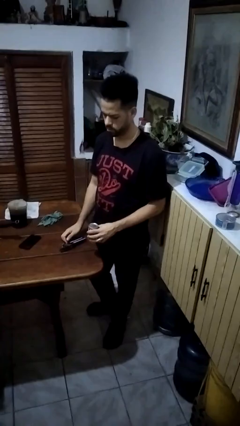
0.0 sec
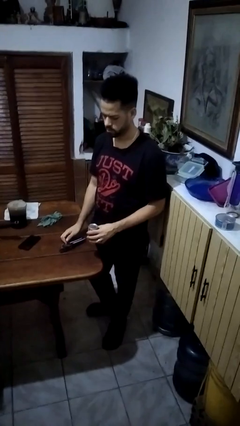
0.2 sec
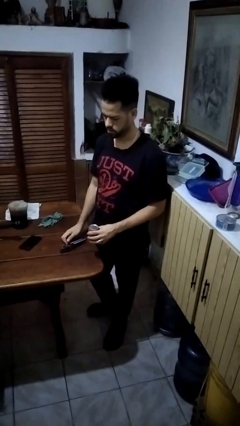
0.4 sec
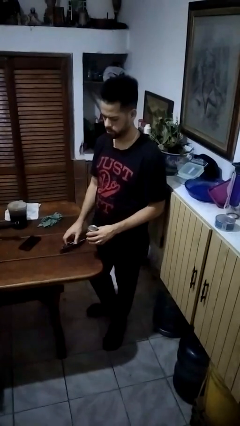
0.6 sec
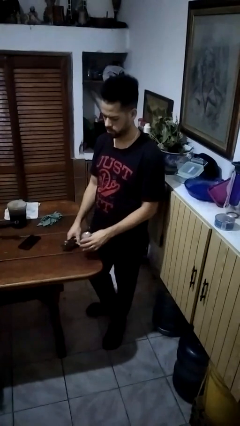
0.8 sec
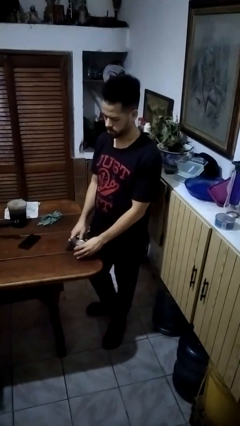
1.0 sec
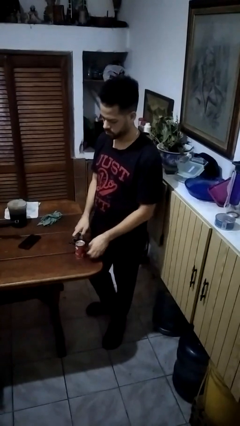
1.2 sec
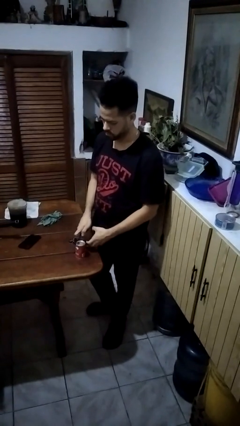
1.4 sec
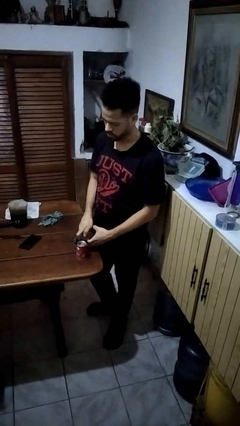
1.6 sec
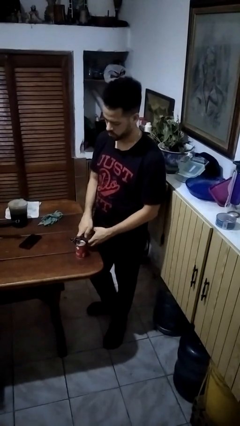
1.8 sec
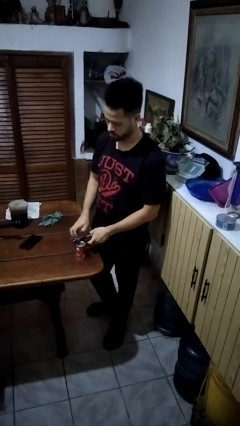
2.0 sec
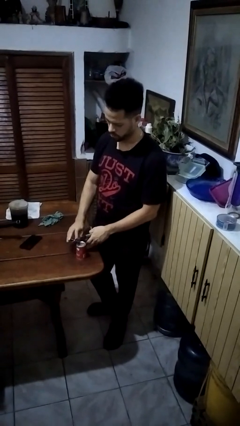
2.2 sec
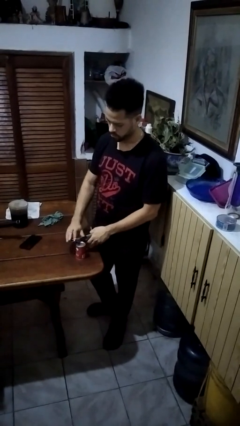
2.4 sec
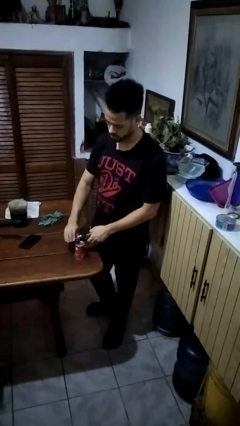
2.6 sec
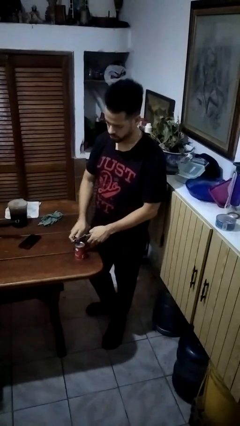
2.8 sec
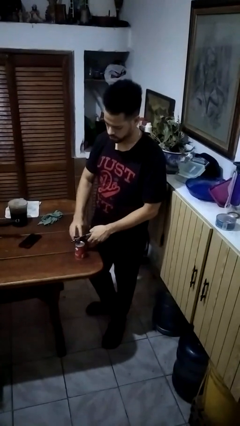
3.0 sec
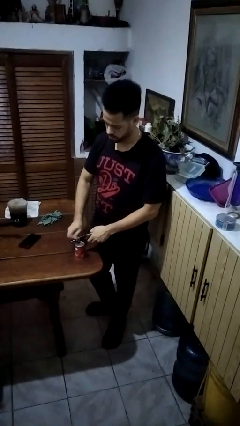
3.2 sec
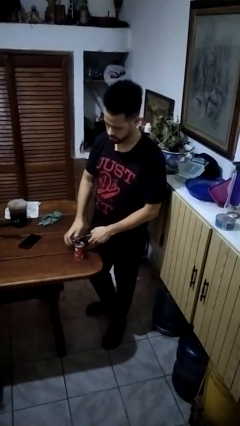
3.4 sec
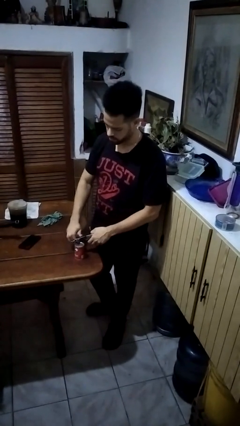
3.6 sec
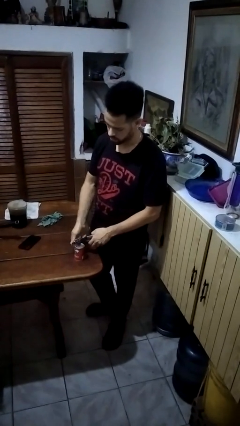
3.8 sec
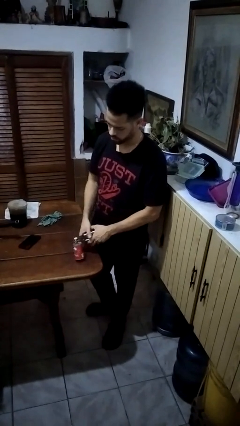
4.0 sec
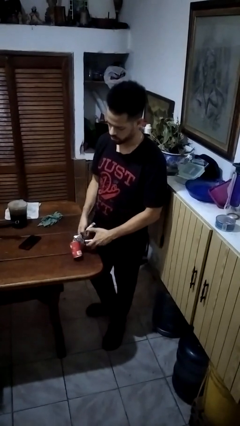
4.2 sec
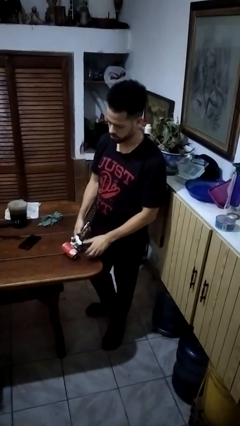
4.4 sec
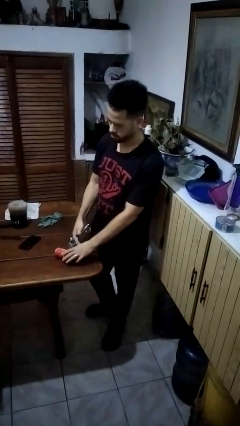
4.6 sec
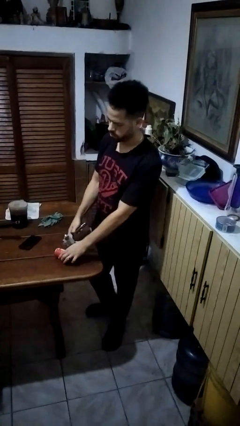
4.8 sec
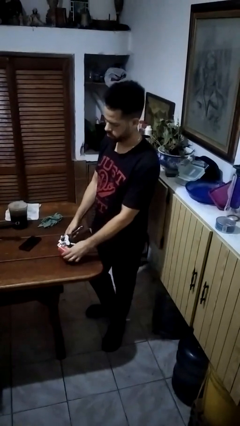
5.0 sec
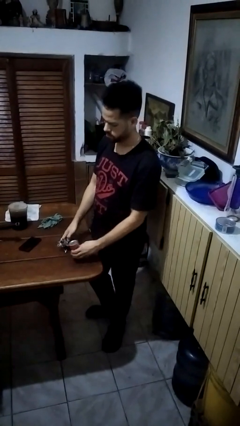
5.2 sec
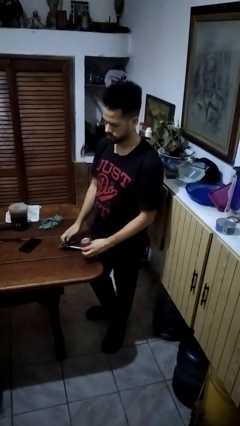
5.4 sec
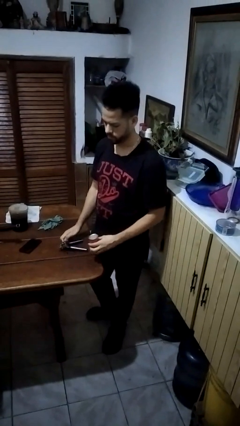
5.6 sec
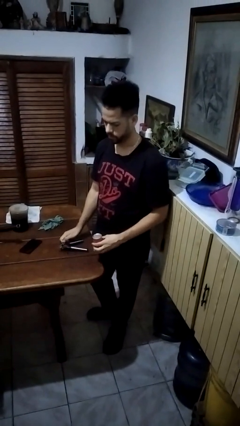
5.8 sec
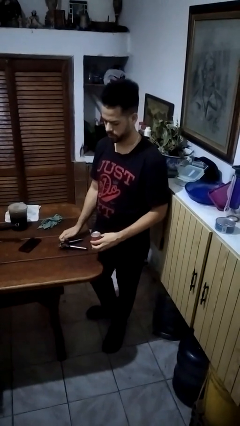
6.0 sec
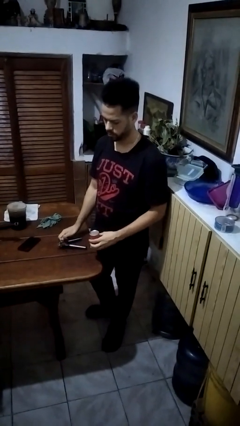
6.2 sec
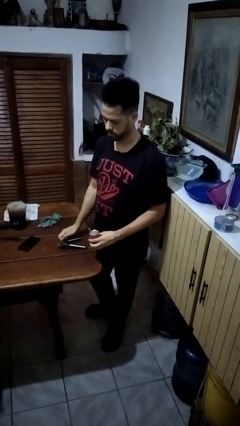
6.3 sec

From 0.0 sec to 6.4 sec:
person opens can with can opener

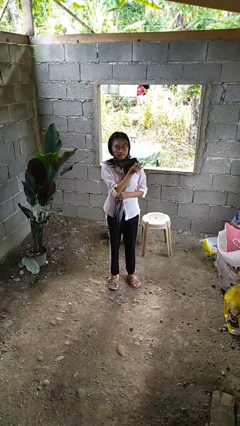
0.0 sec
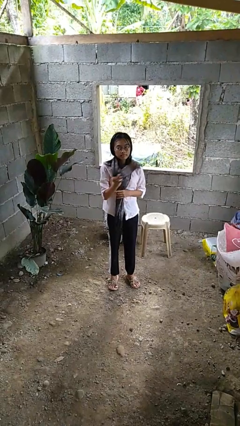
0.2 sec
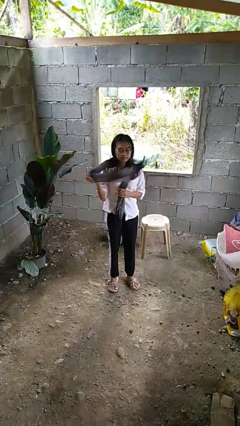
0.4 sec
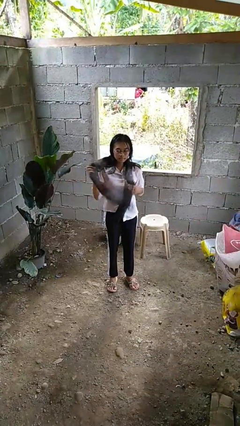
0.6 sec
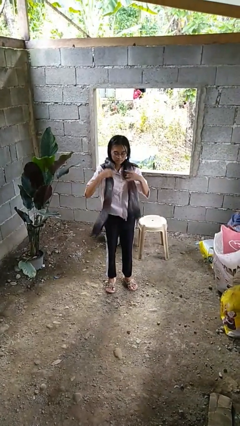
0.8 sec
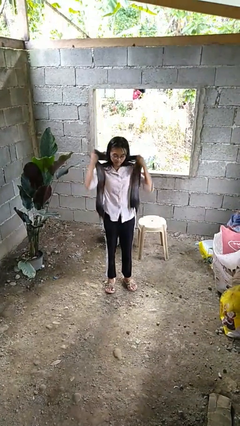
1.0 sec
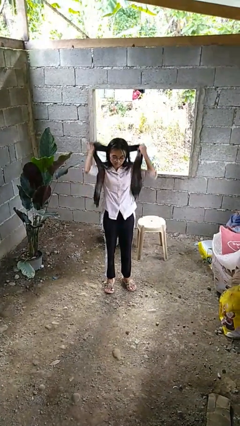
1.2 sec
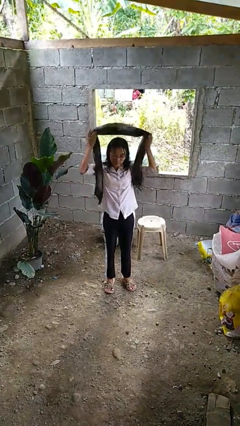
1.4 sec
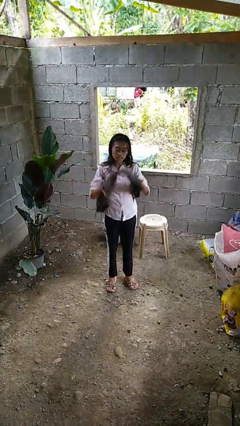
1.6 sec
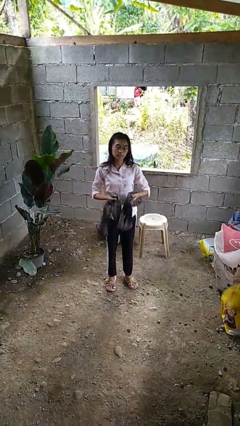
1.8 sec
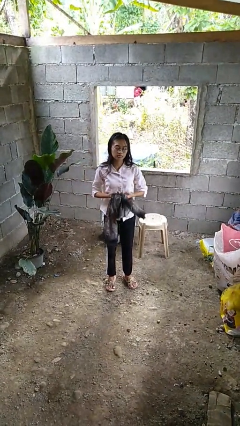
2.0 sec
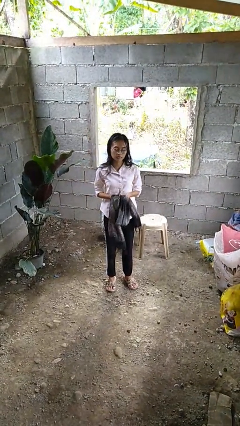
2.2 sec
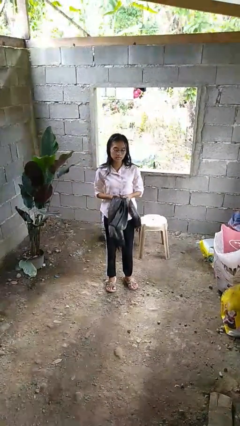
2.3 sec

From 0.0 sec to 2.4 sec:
person takes off scarf

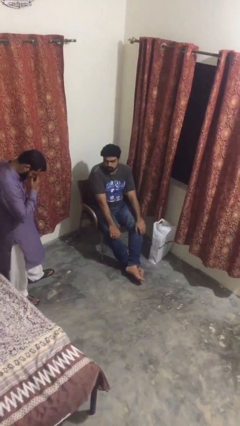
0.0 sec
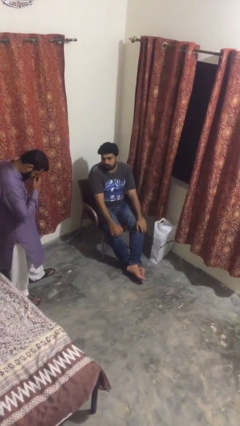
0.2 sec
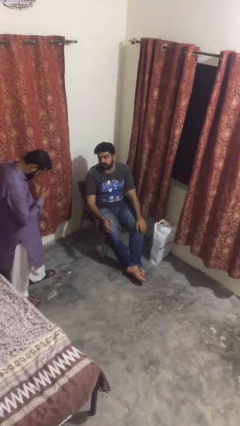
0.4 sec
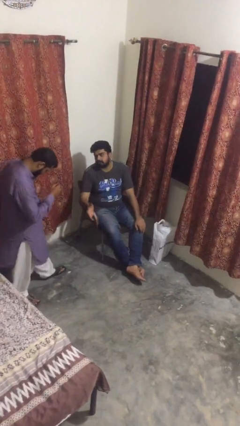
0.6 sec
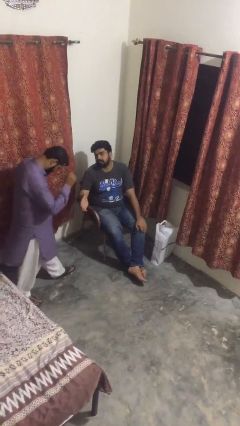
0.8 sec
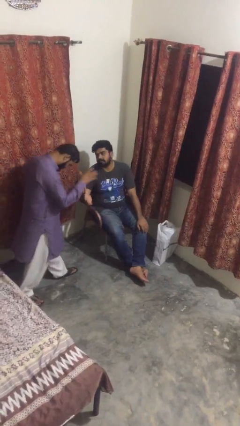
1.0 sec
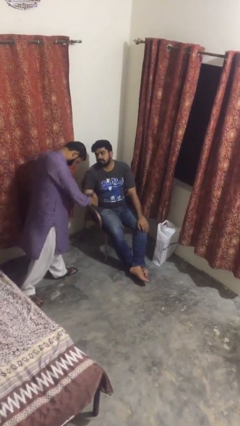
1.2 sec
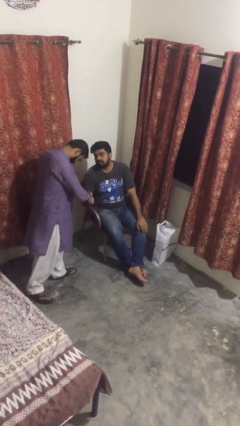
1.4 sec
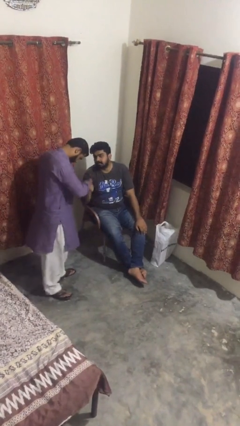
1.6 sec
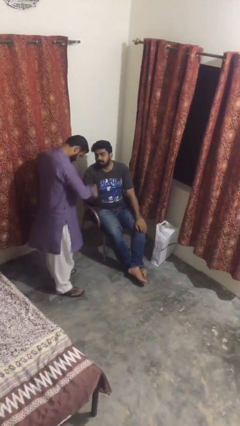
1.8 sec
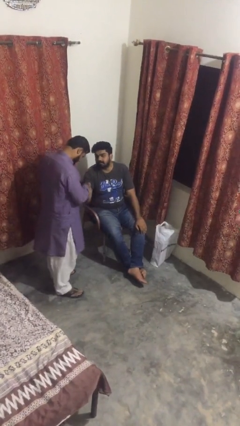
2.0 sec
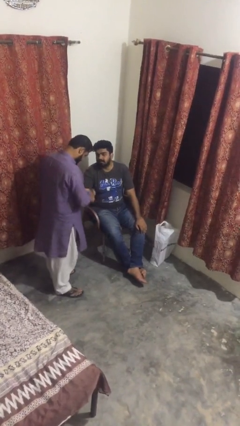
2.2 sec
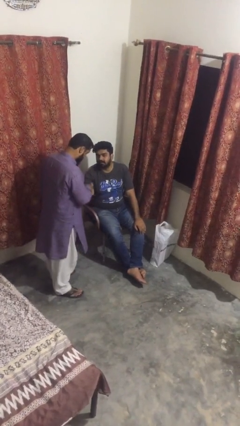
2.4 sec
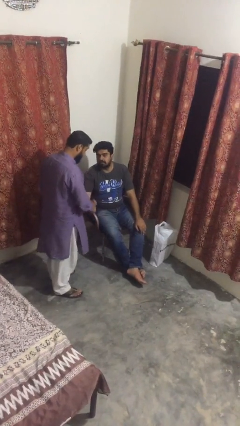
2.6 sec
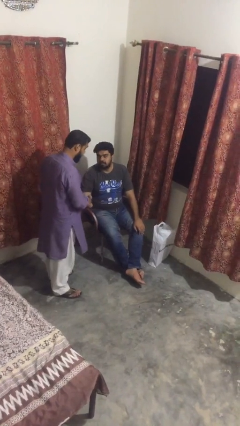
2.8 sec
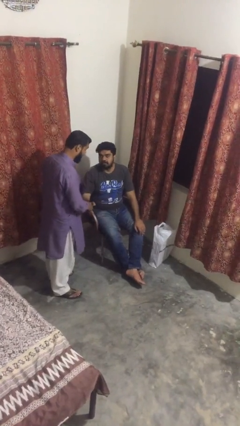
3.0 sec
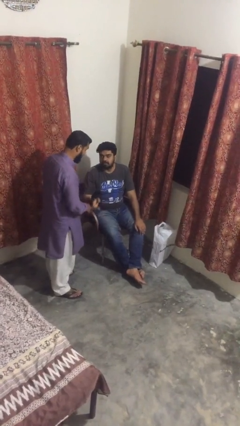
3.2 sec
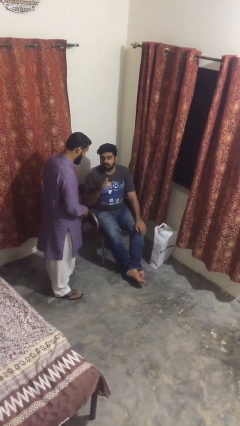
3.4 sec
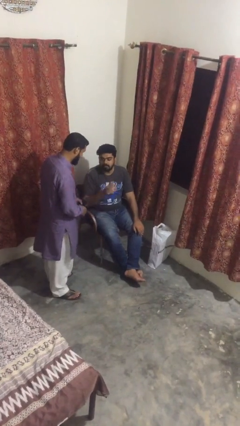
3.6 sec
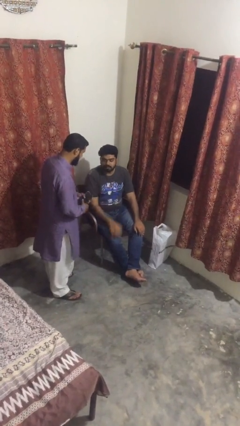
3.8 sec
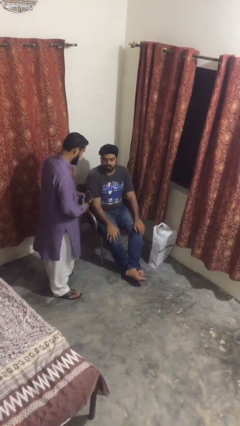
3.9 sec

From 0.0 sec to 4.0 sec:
person shakes hand

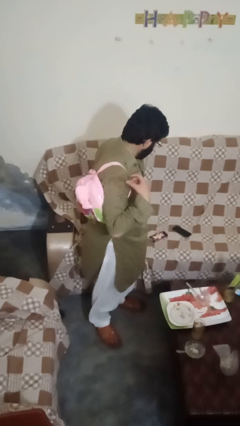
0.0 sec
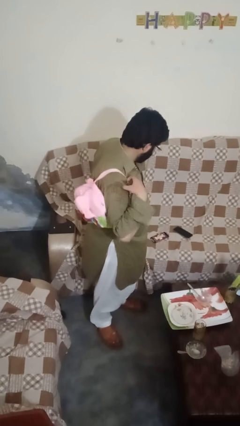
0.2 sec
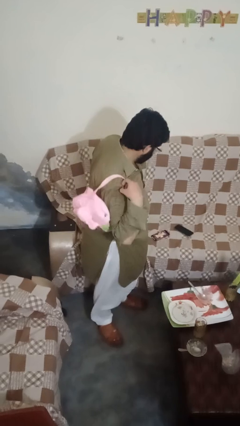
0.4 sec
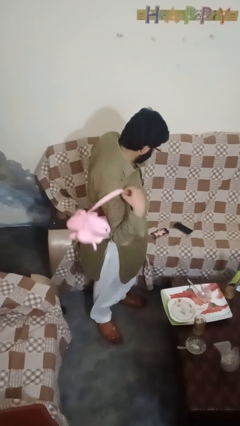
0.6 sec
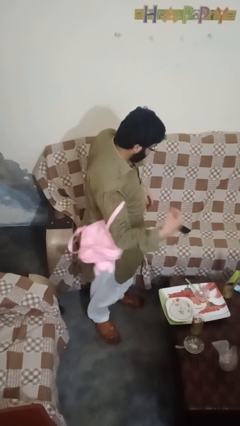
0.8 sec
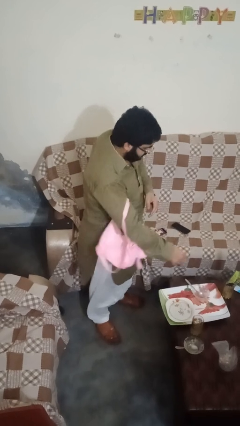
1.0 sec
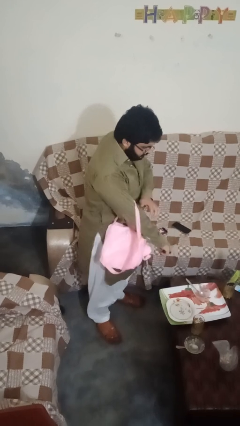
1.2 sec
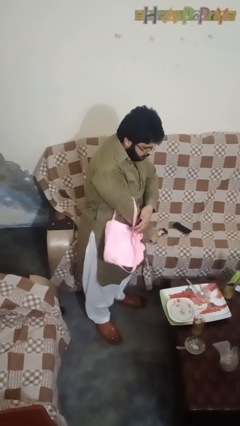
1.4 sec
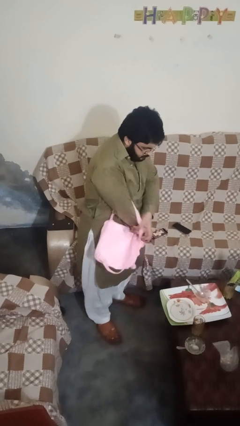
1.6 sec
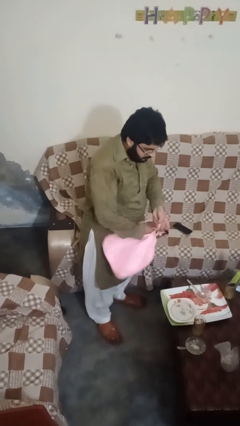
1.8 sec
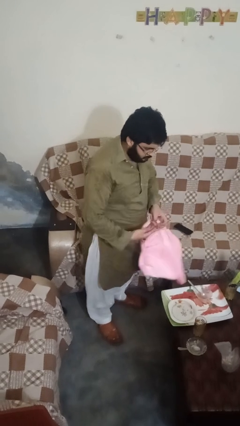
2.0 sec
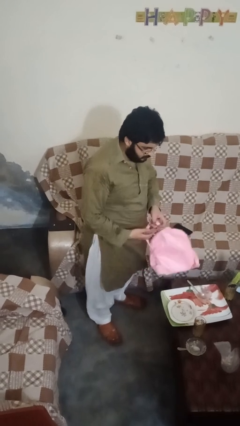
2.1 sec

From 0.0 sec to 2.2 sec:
person takes off backpack

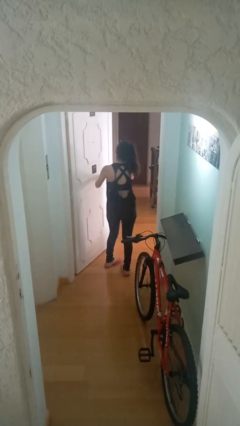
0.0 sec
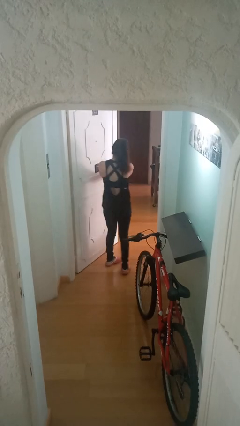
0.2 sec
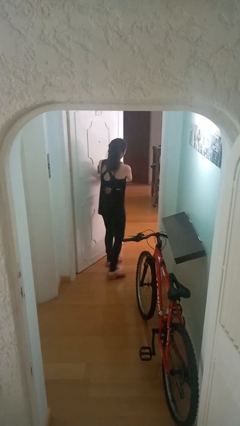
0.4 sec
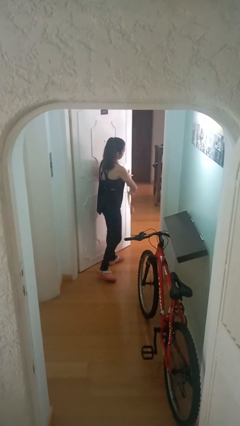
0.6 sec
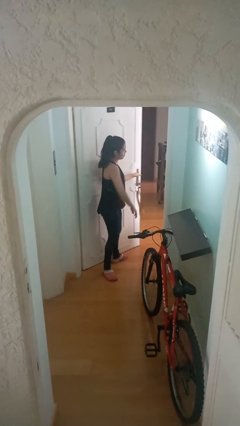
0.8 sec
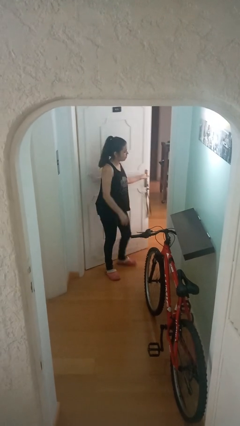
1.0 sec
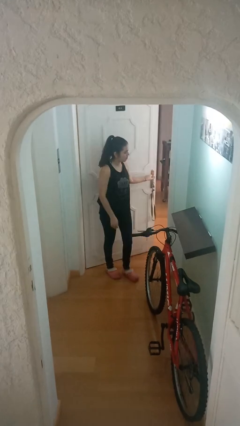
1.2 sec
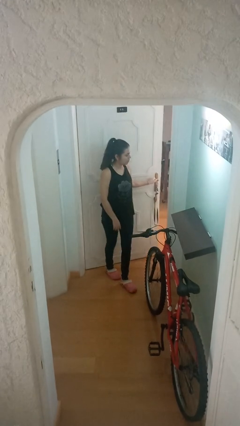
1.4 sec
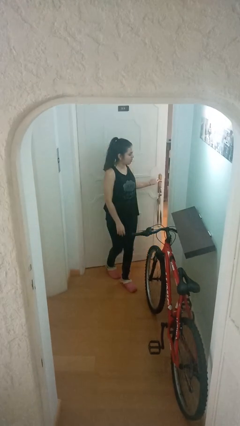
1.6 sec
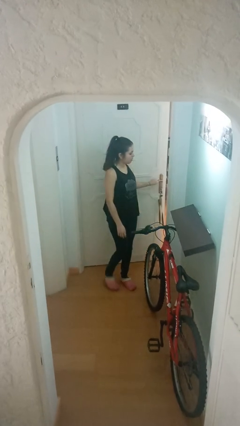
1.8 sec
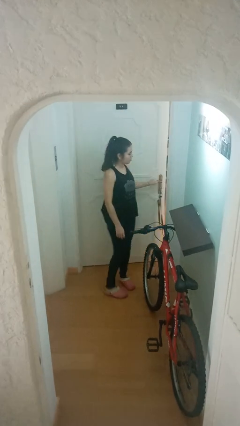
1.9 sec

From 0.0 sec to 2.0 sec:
person closes facility door

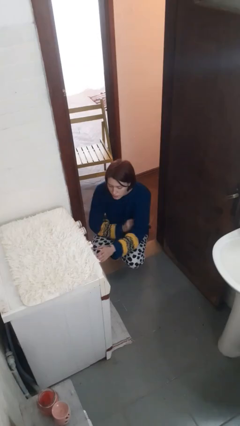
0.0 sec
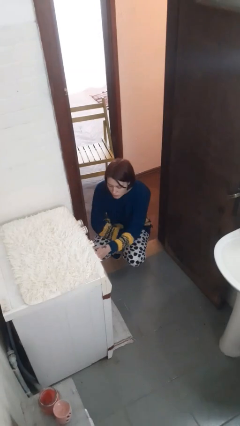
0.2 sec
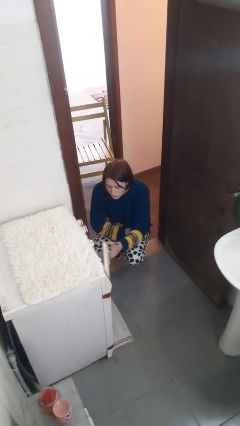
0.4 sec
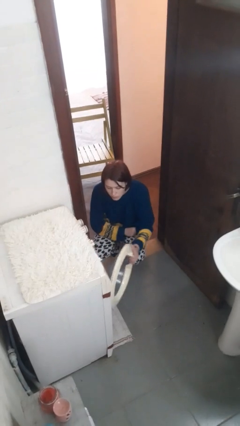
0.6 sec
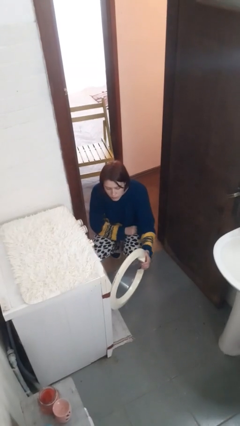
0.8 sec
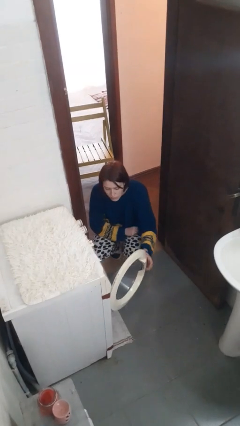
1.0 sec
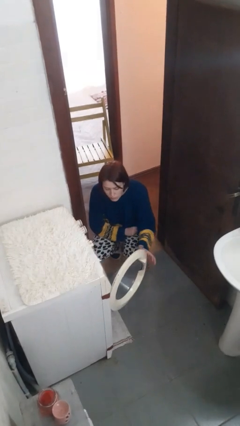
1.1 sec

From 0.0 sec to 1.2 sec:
person opens clothes washer
